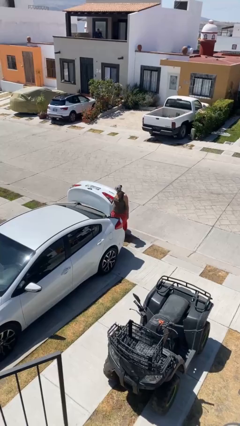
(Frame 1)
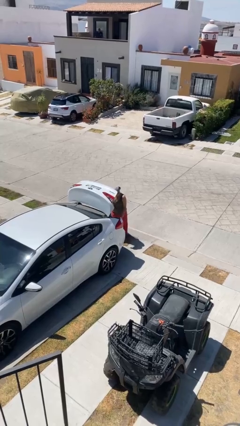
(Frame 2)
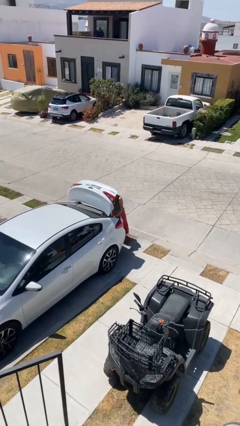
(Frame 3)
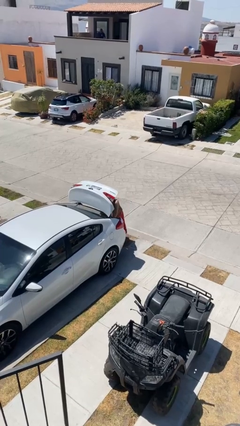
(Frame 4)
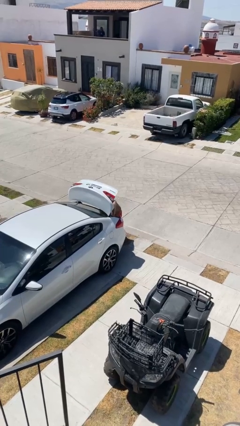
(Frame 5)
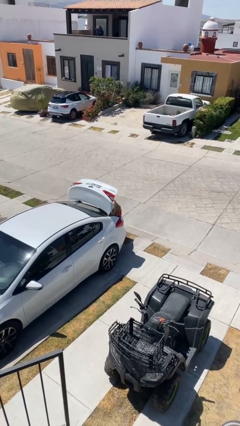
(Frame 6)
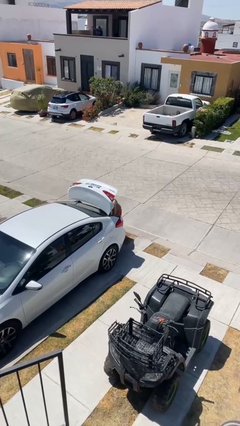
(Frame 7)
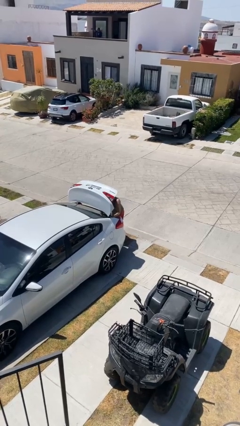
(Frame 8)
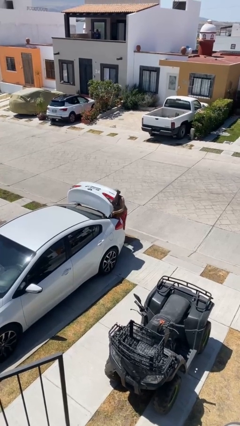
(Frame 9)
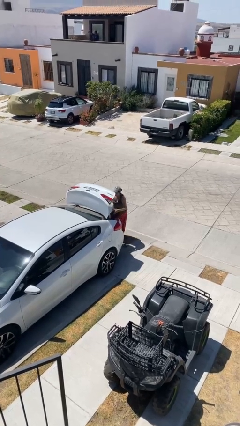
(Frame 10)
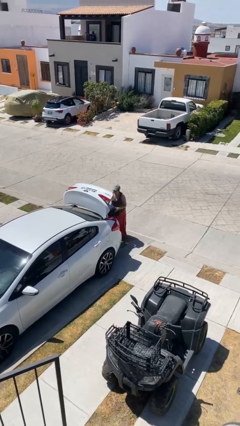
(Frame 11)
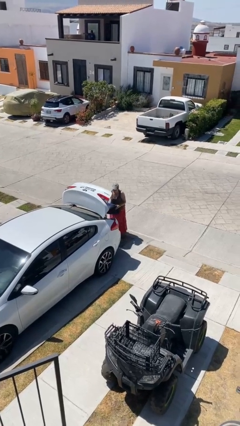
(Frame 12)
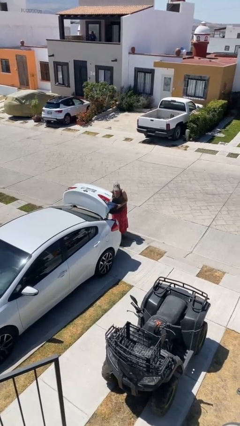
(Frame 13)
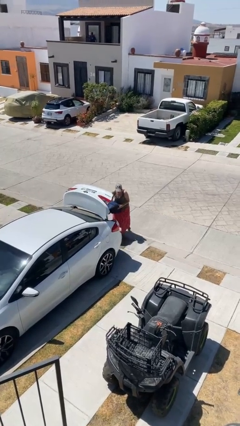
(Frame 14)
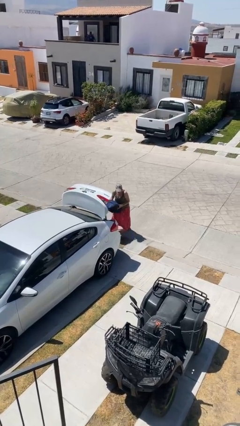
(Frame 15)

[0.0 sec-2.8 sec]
person unloads car

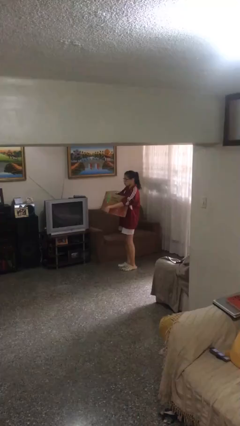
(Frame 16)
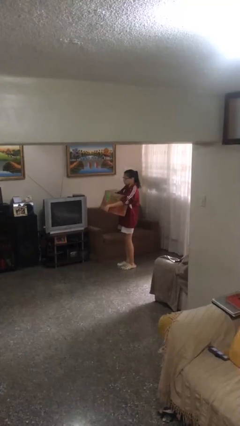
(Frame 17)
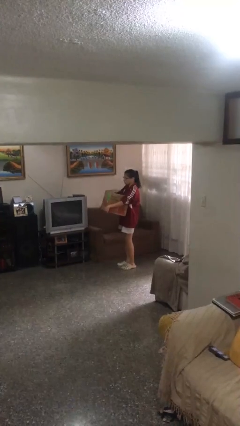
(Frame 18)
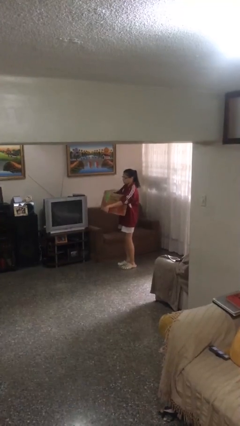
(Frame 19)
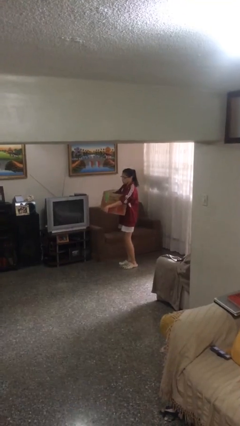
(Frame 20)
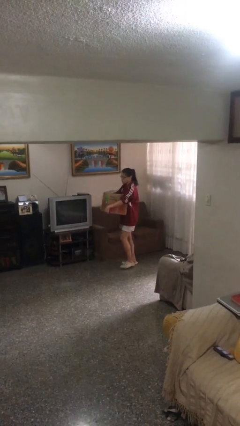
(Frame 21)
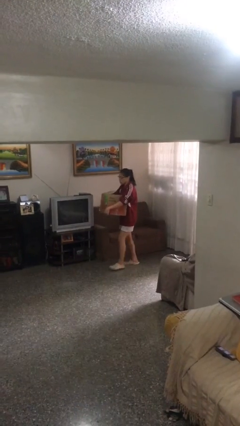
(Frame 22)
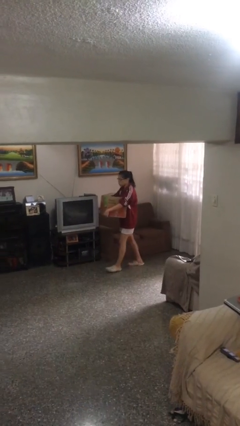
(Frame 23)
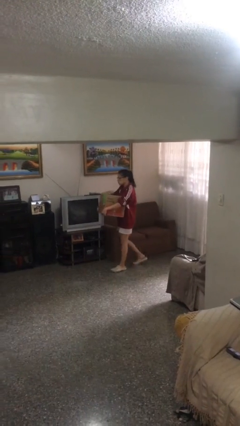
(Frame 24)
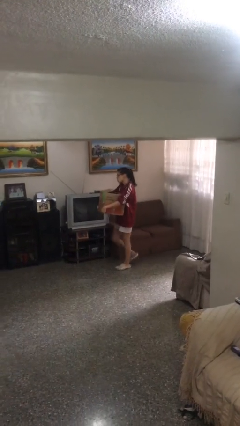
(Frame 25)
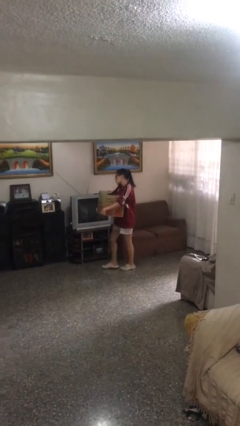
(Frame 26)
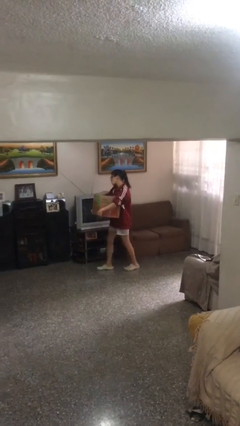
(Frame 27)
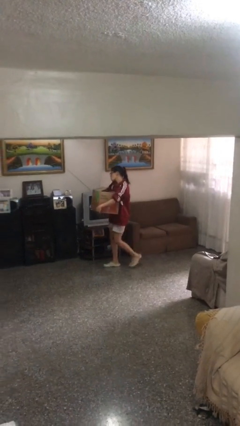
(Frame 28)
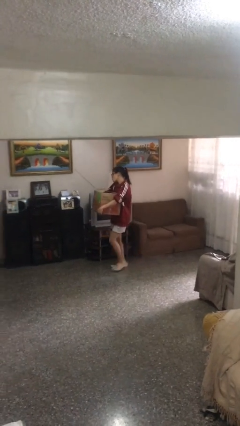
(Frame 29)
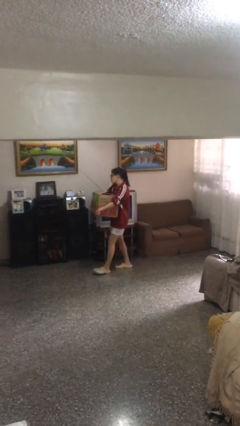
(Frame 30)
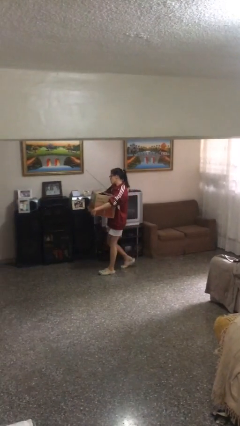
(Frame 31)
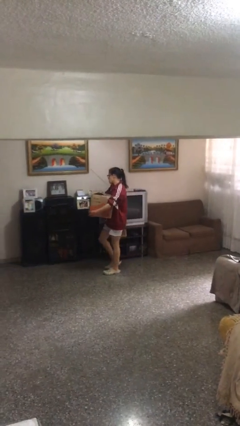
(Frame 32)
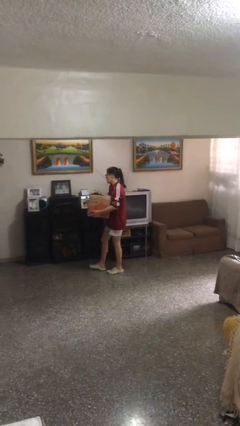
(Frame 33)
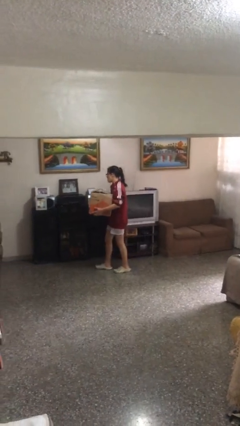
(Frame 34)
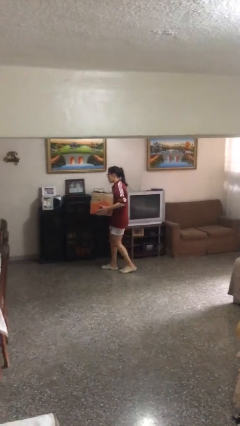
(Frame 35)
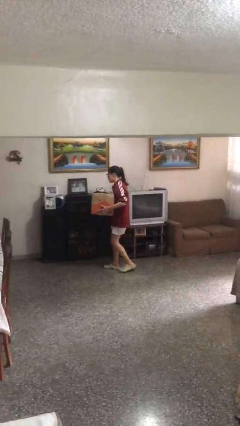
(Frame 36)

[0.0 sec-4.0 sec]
person carries heavy object

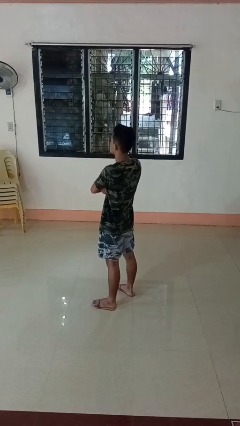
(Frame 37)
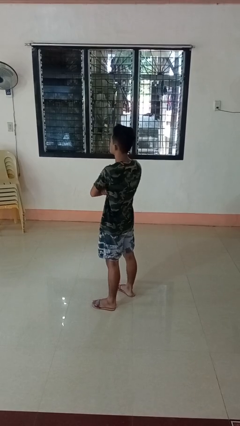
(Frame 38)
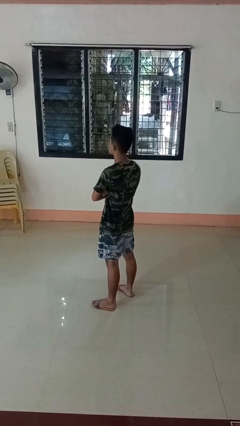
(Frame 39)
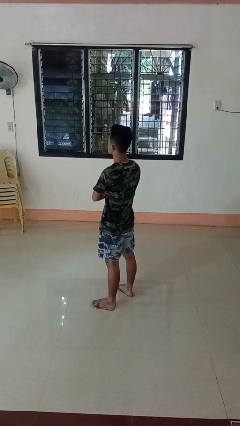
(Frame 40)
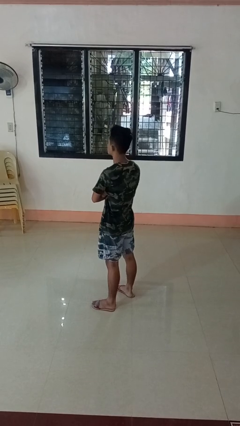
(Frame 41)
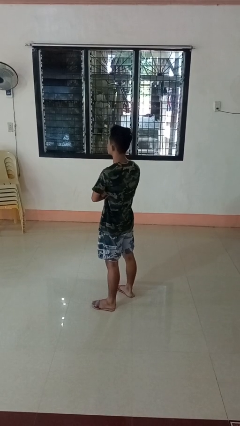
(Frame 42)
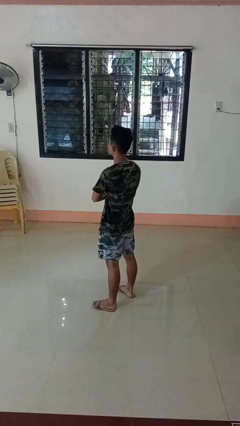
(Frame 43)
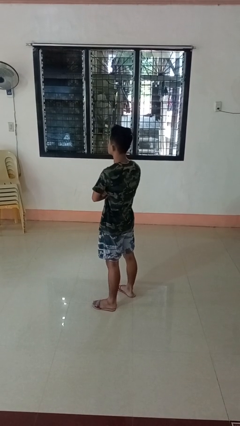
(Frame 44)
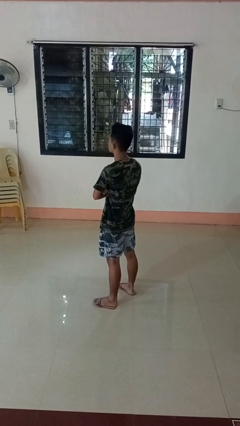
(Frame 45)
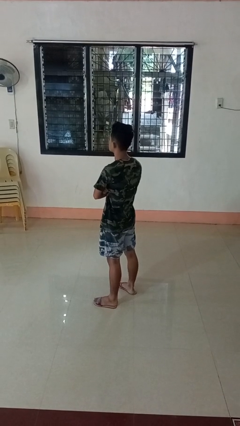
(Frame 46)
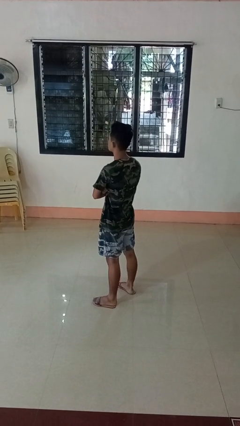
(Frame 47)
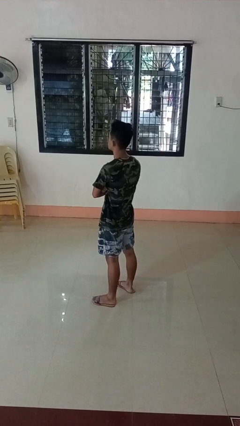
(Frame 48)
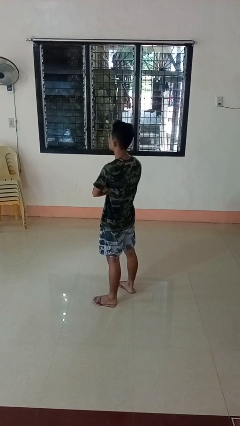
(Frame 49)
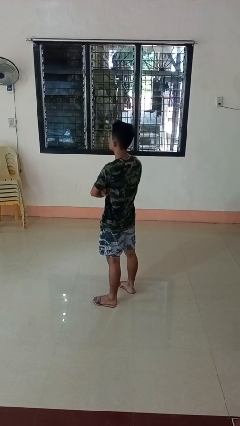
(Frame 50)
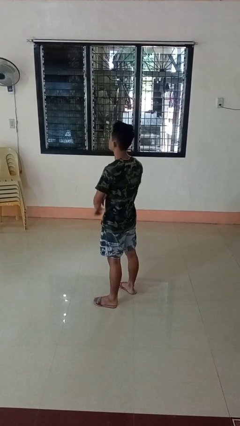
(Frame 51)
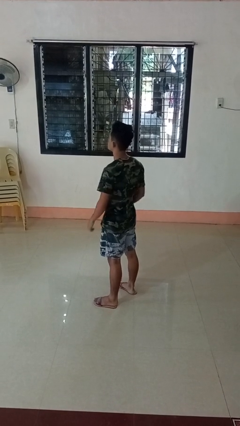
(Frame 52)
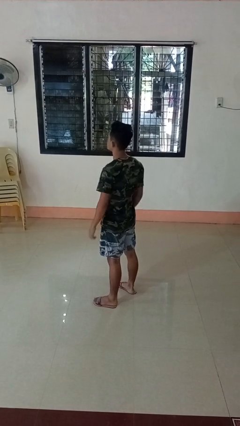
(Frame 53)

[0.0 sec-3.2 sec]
person crosses arms

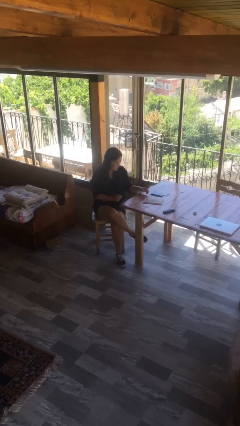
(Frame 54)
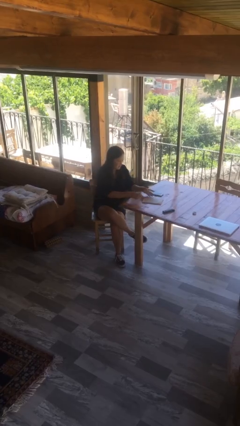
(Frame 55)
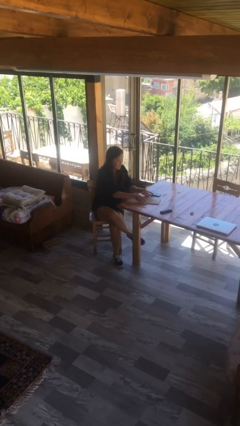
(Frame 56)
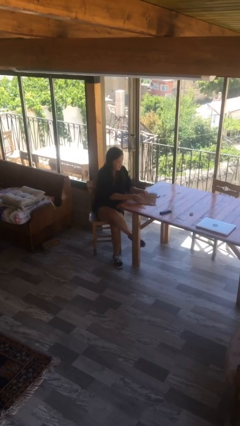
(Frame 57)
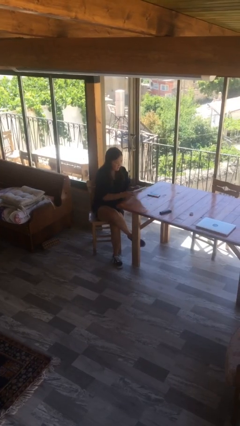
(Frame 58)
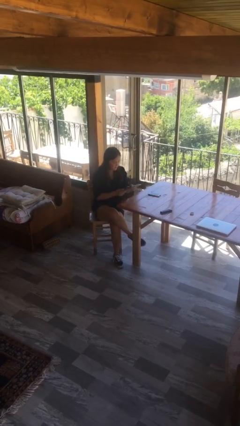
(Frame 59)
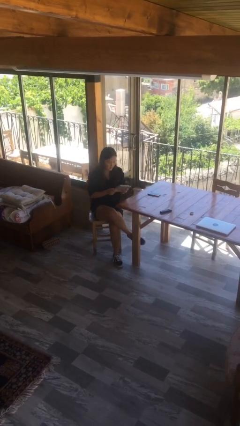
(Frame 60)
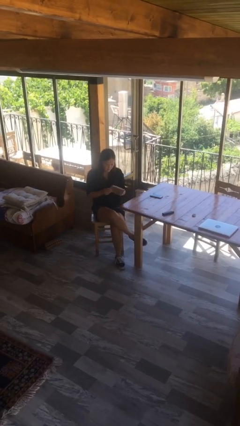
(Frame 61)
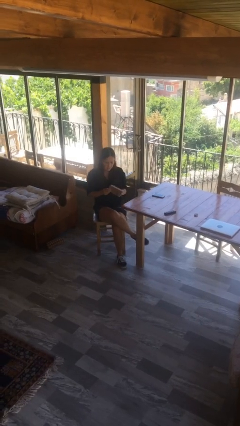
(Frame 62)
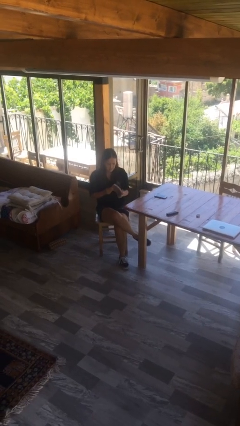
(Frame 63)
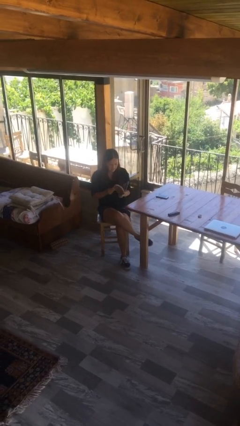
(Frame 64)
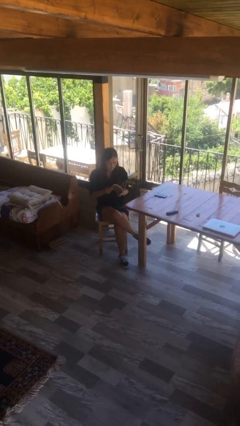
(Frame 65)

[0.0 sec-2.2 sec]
person picks up object from table

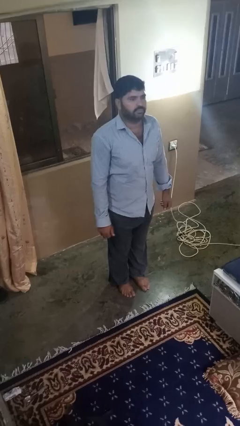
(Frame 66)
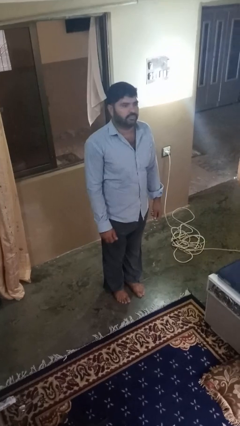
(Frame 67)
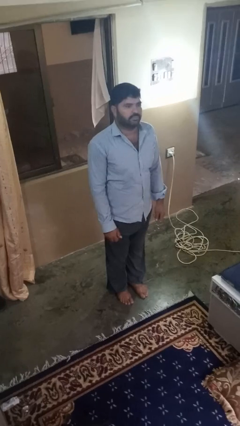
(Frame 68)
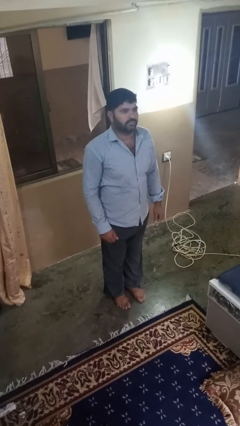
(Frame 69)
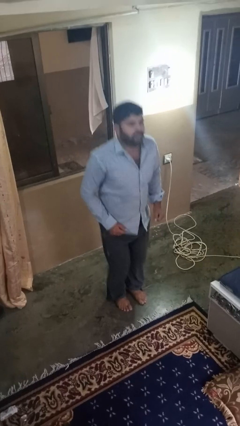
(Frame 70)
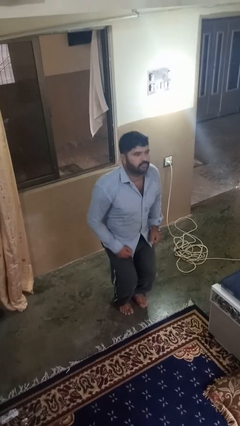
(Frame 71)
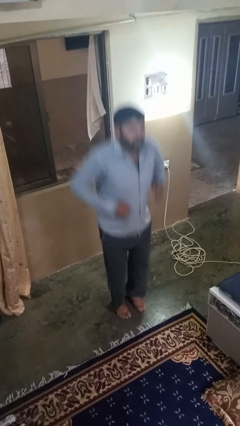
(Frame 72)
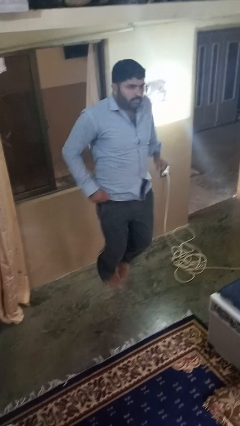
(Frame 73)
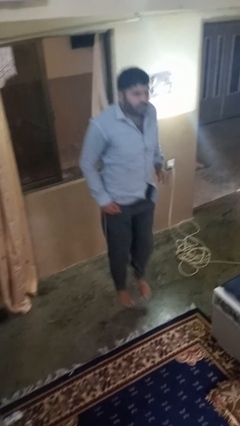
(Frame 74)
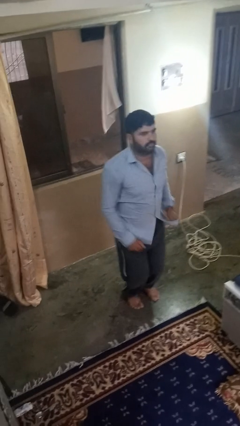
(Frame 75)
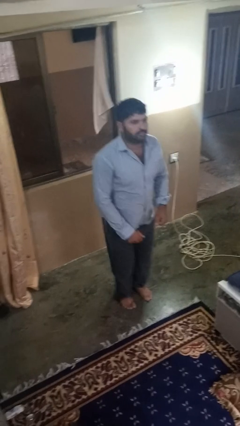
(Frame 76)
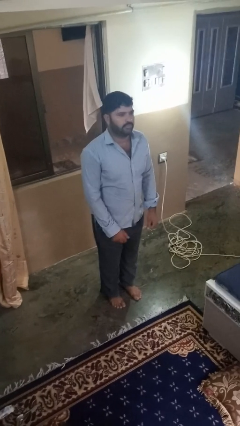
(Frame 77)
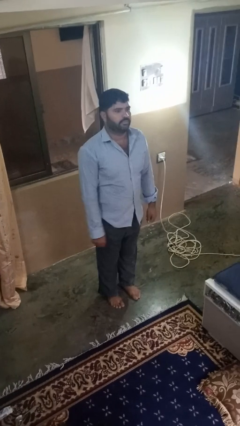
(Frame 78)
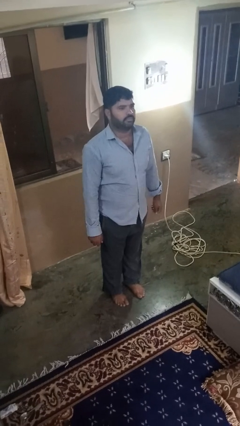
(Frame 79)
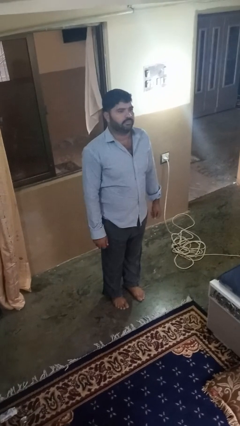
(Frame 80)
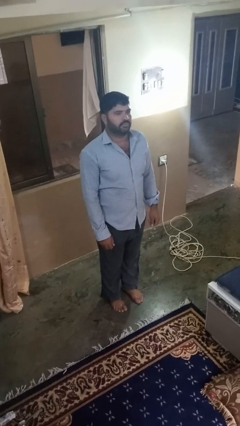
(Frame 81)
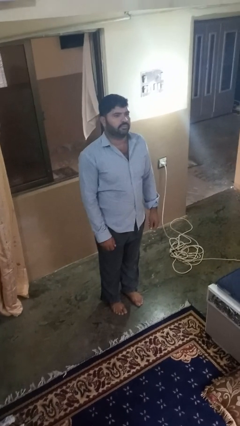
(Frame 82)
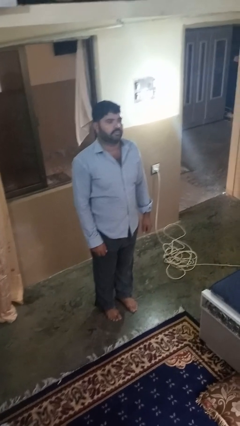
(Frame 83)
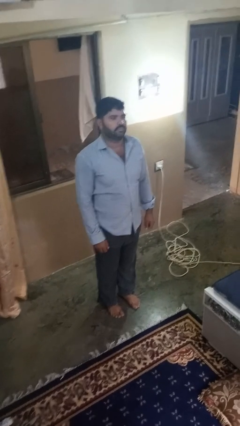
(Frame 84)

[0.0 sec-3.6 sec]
person jumps

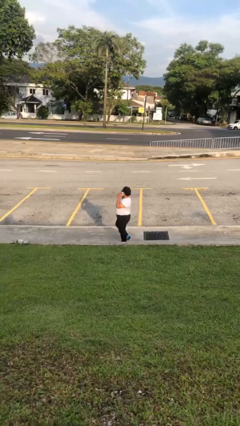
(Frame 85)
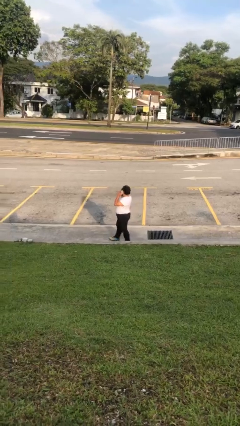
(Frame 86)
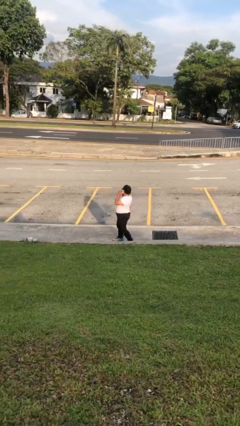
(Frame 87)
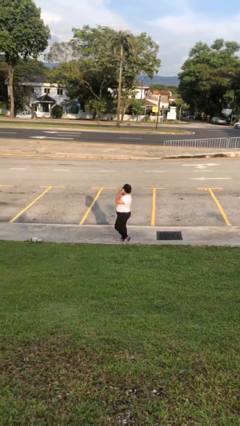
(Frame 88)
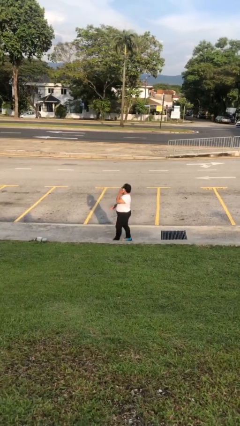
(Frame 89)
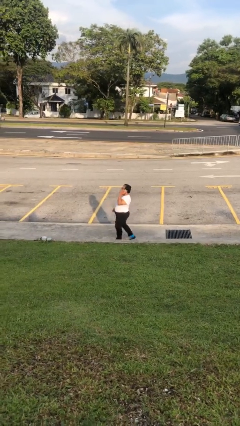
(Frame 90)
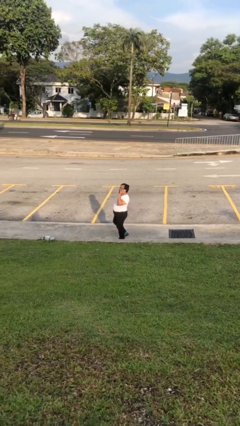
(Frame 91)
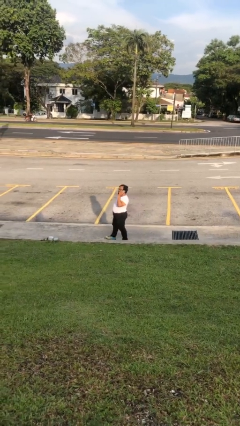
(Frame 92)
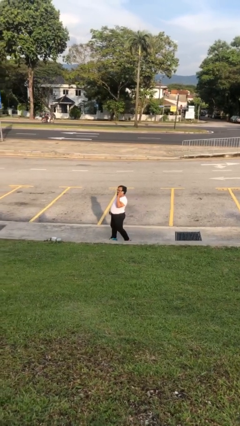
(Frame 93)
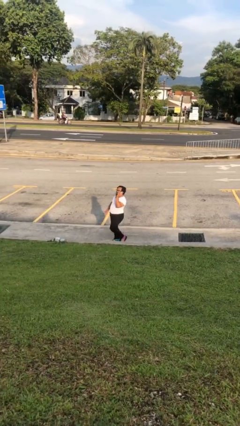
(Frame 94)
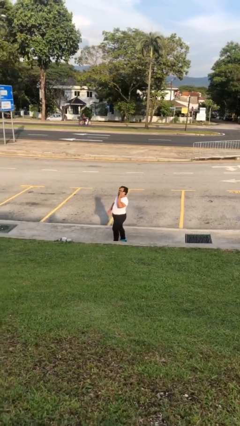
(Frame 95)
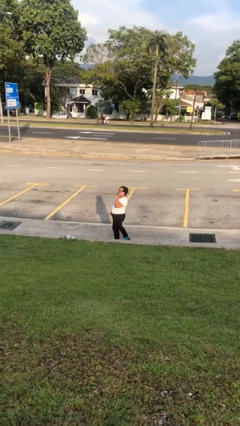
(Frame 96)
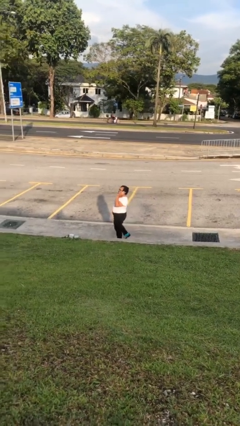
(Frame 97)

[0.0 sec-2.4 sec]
person talks on phone
